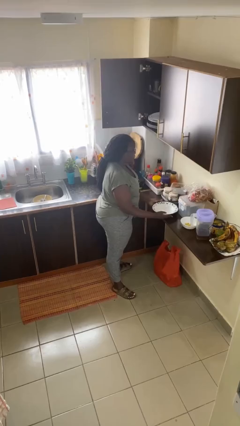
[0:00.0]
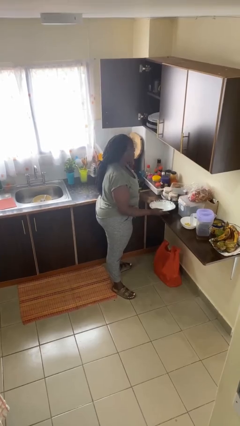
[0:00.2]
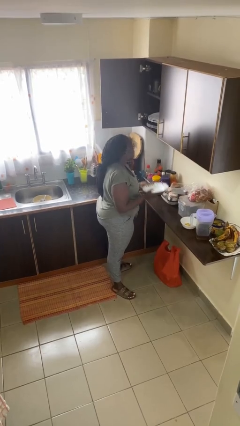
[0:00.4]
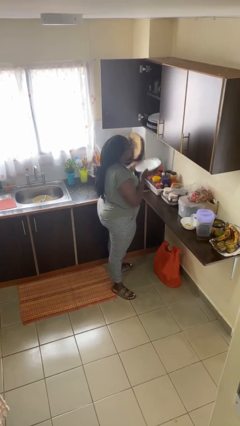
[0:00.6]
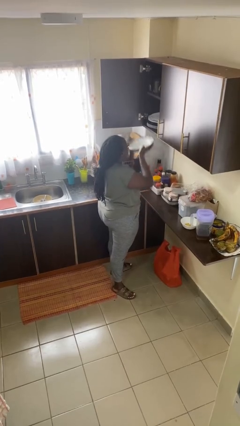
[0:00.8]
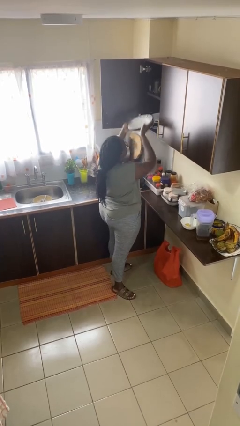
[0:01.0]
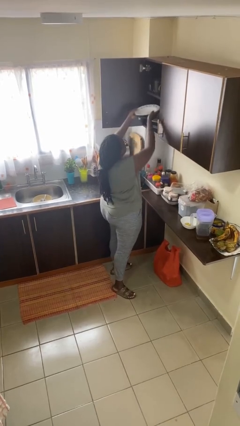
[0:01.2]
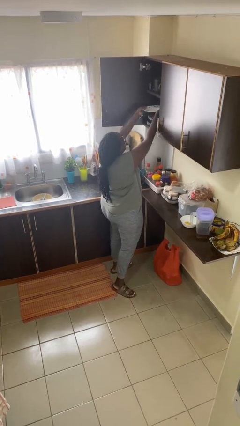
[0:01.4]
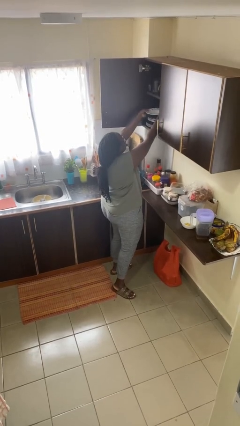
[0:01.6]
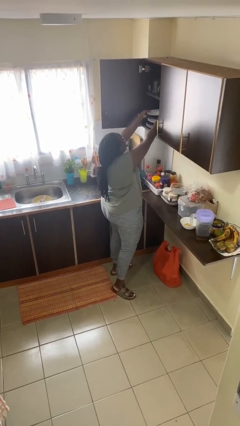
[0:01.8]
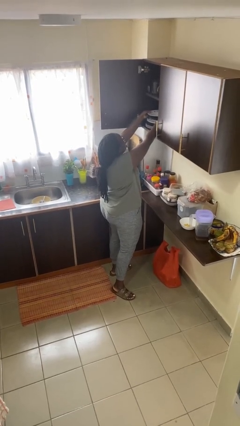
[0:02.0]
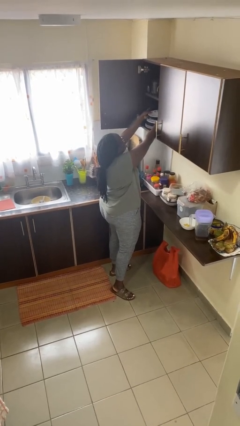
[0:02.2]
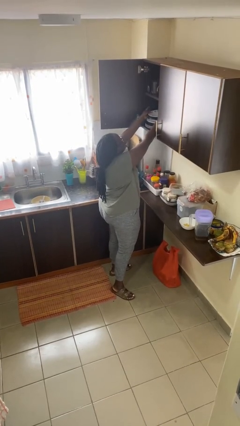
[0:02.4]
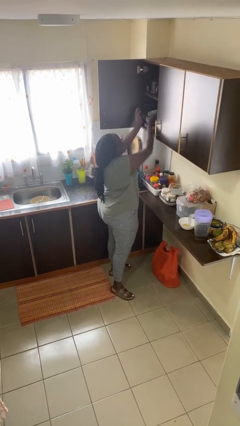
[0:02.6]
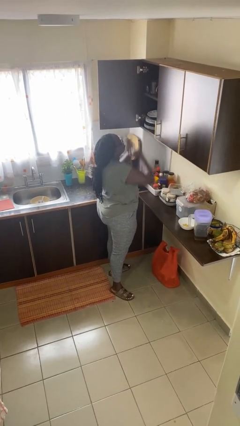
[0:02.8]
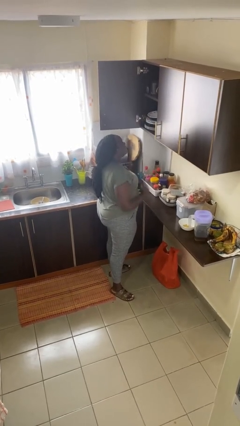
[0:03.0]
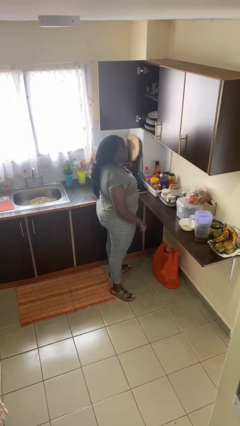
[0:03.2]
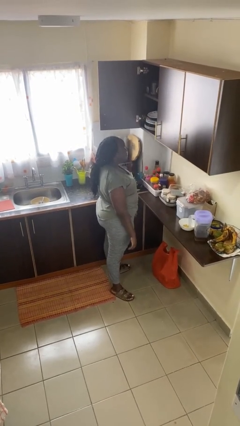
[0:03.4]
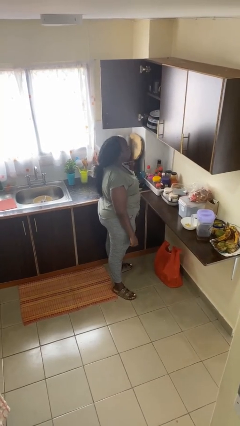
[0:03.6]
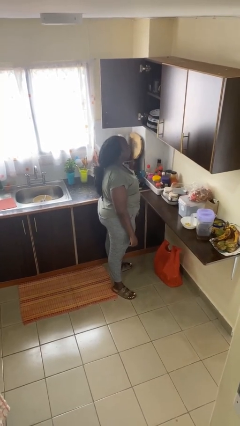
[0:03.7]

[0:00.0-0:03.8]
person puts object in cabinet

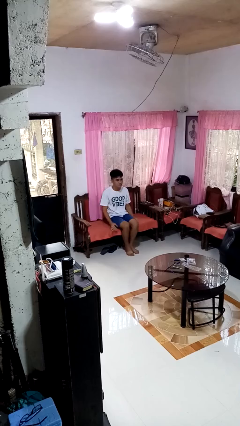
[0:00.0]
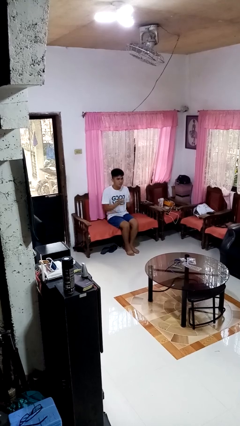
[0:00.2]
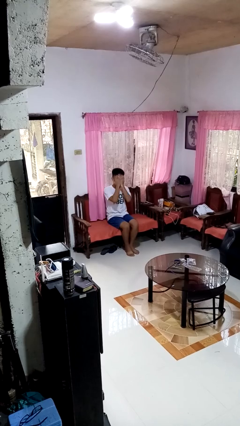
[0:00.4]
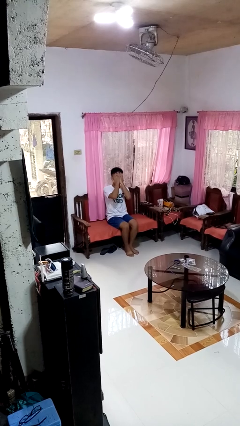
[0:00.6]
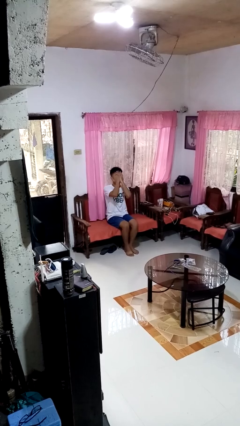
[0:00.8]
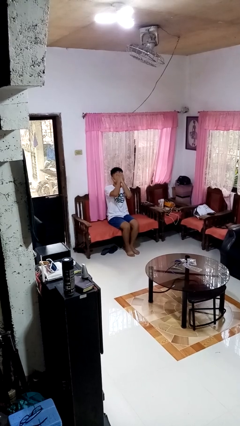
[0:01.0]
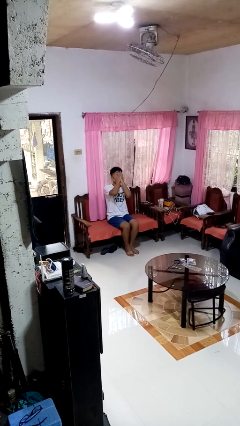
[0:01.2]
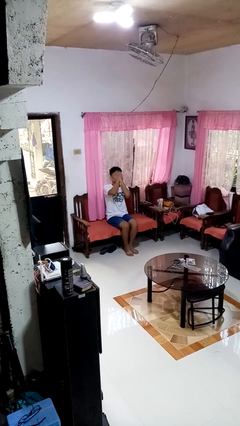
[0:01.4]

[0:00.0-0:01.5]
person covers face with hands

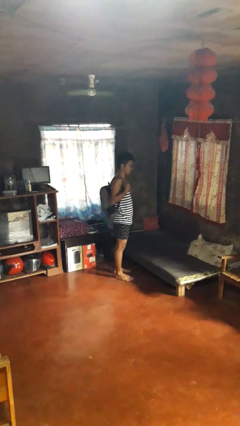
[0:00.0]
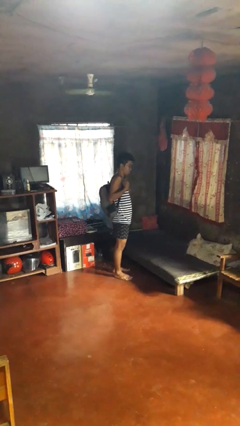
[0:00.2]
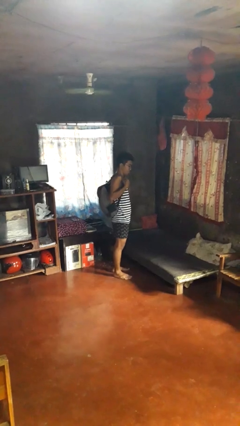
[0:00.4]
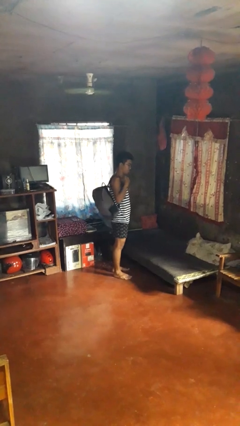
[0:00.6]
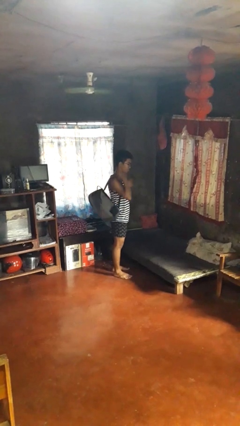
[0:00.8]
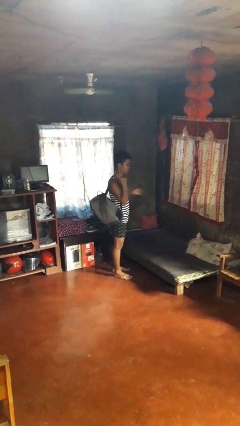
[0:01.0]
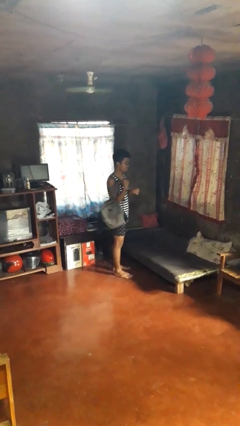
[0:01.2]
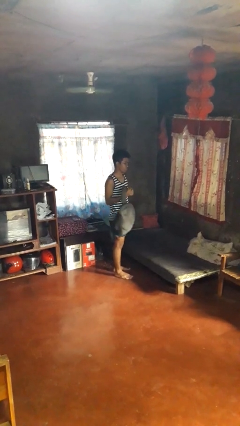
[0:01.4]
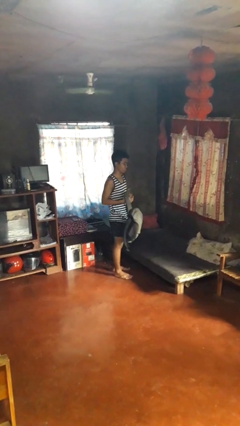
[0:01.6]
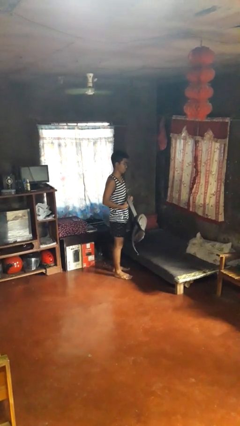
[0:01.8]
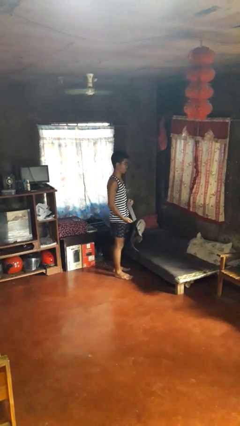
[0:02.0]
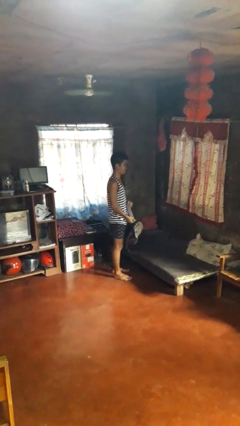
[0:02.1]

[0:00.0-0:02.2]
person takes off backpack

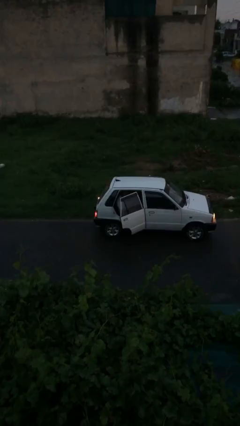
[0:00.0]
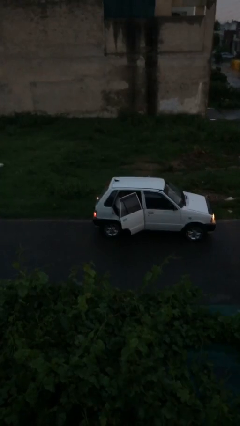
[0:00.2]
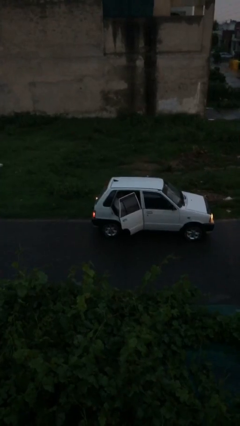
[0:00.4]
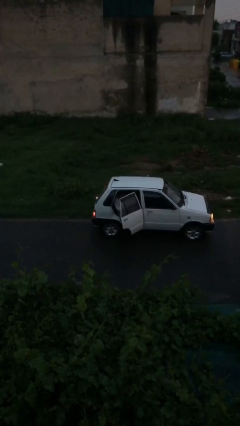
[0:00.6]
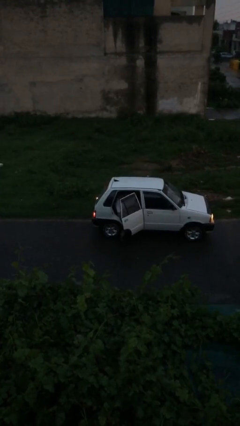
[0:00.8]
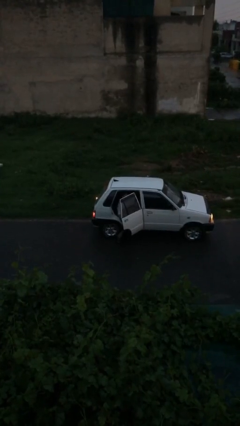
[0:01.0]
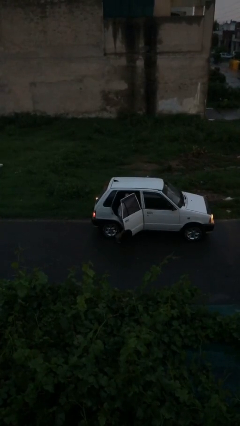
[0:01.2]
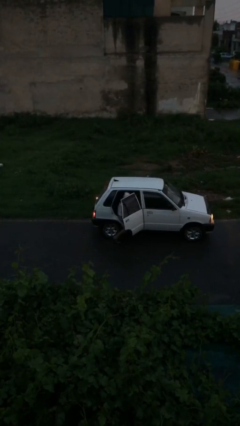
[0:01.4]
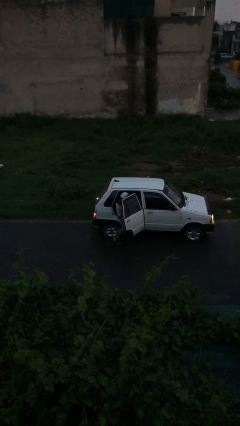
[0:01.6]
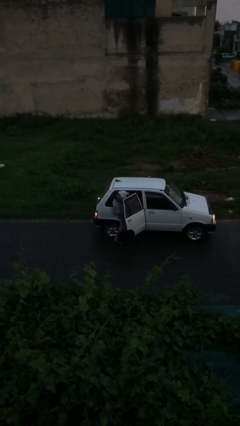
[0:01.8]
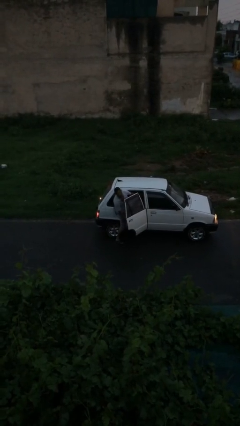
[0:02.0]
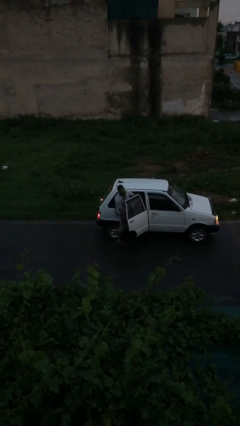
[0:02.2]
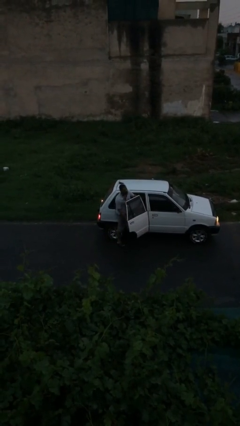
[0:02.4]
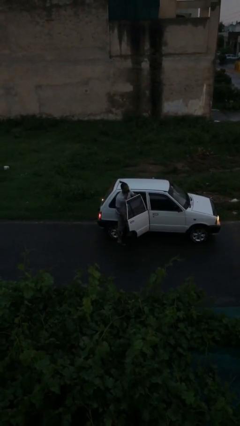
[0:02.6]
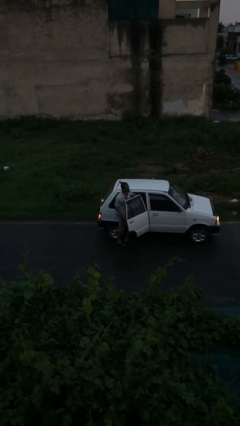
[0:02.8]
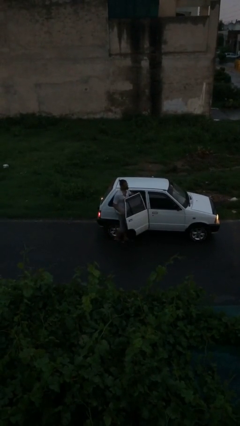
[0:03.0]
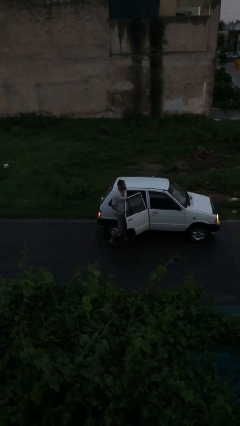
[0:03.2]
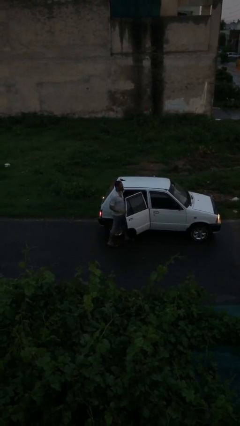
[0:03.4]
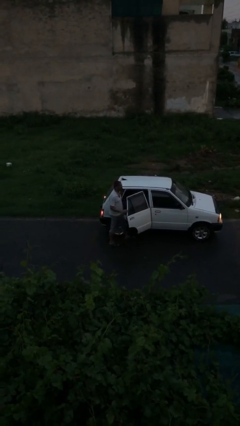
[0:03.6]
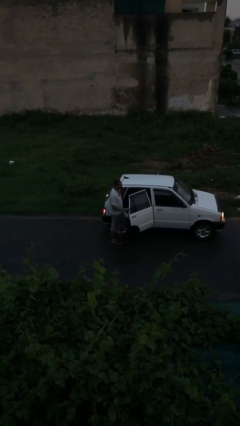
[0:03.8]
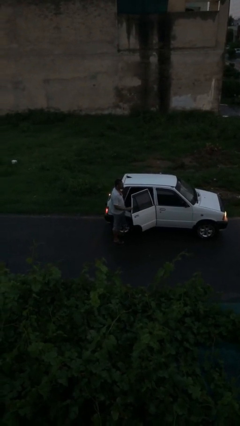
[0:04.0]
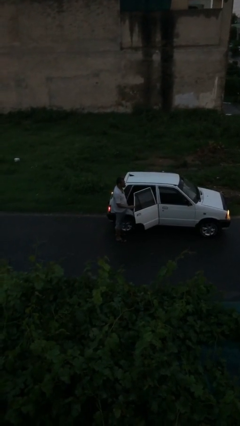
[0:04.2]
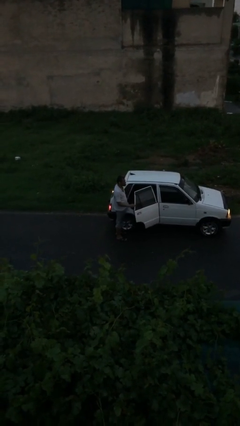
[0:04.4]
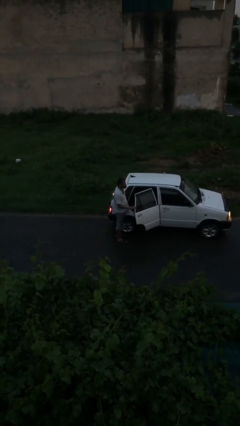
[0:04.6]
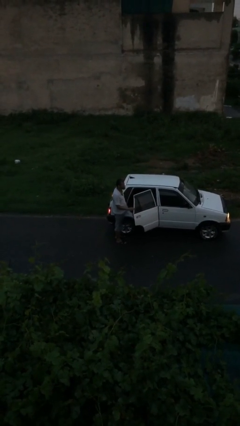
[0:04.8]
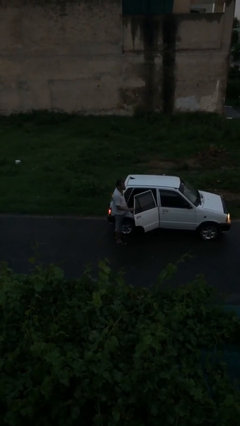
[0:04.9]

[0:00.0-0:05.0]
person exits car

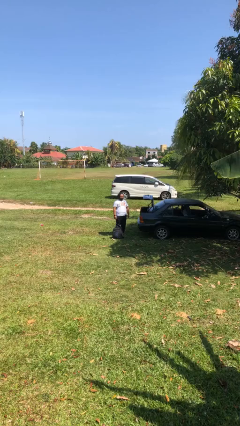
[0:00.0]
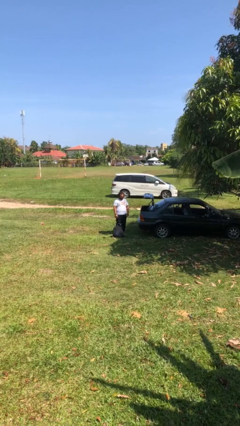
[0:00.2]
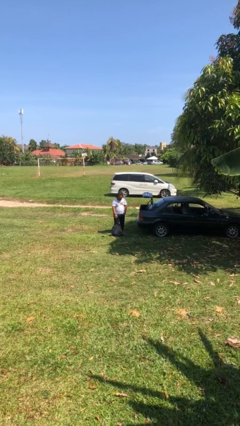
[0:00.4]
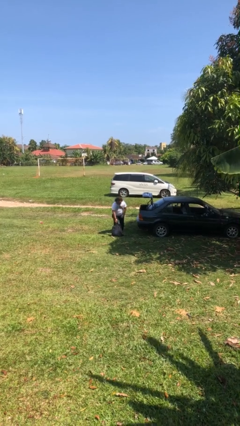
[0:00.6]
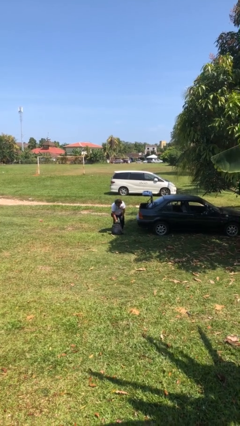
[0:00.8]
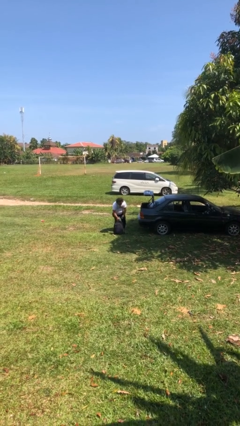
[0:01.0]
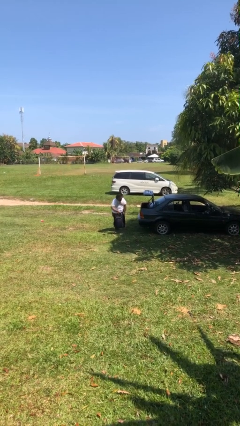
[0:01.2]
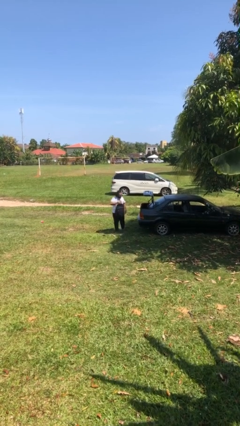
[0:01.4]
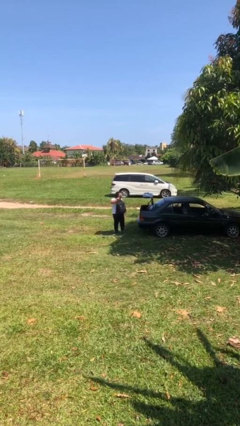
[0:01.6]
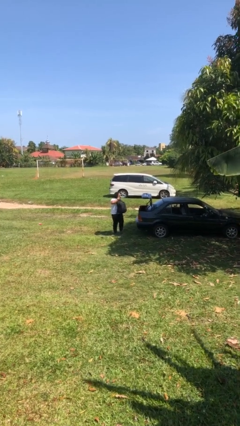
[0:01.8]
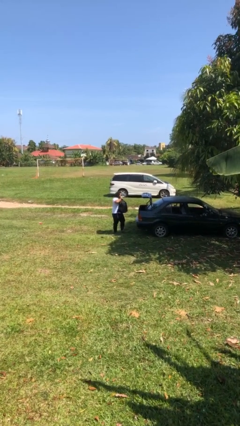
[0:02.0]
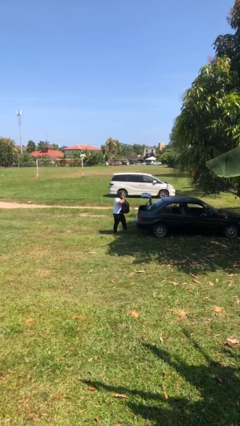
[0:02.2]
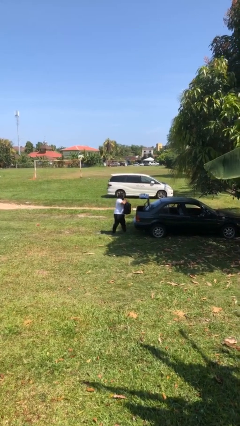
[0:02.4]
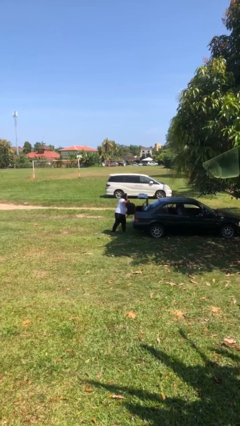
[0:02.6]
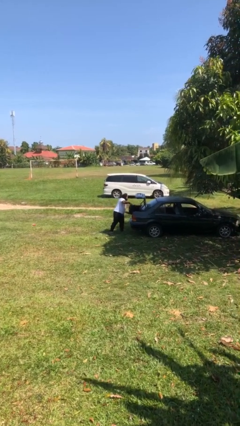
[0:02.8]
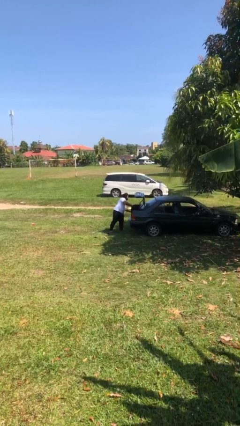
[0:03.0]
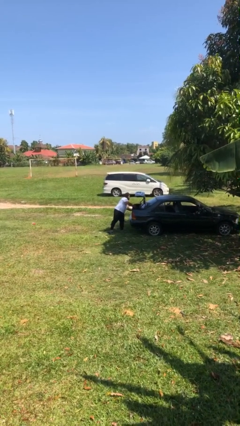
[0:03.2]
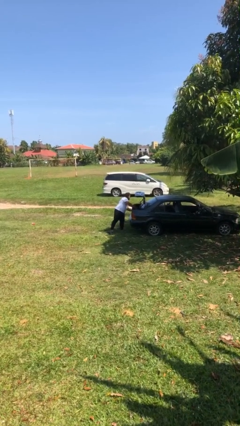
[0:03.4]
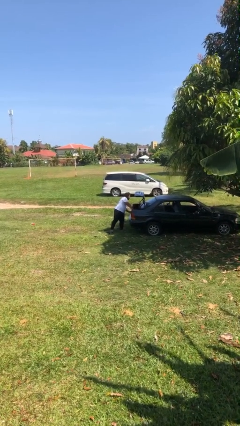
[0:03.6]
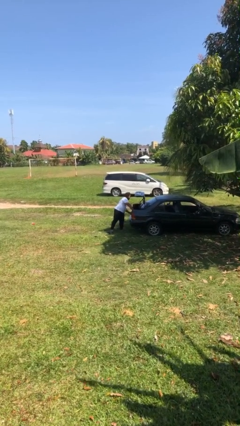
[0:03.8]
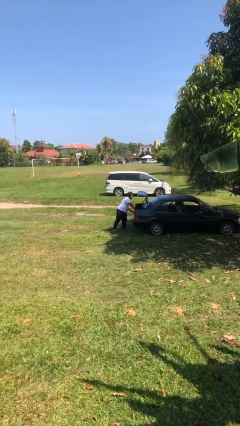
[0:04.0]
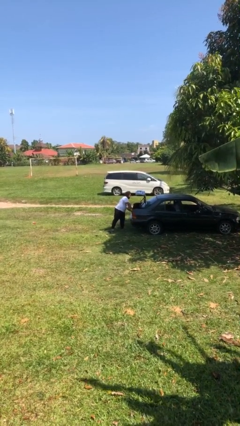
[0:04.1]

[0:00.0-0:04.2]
person loads car

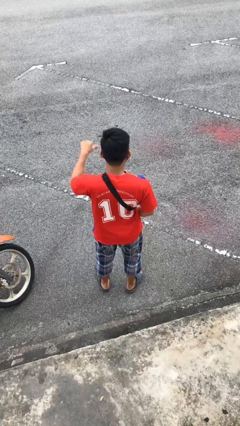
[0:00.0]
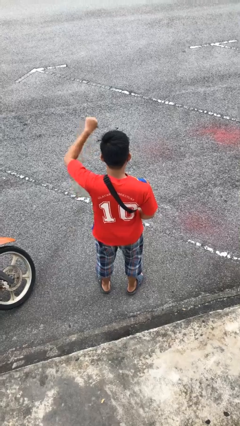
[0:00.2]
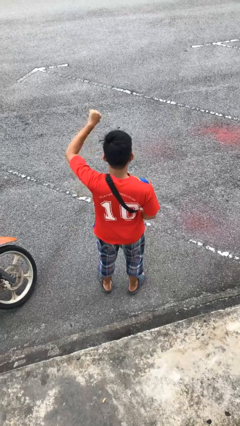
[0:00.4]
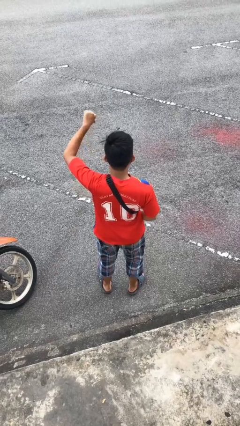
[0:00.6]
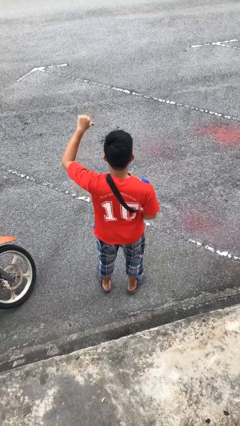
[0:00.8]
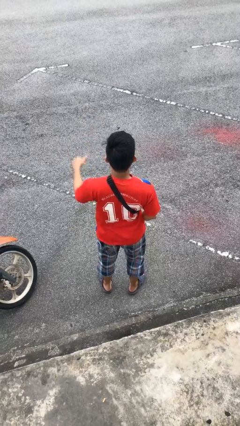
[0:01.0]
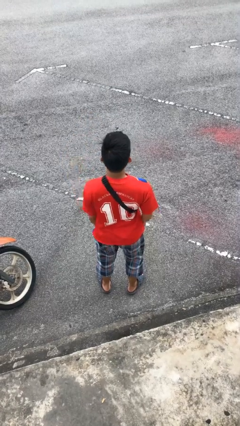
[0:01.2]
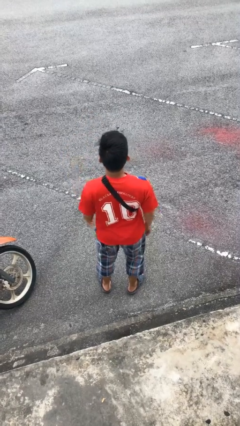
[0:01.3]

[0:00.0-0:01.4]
person gestures thumbs down
